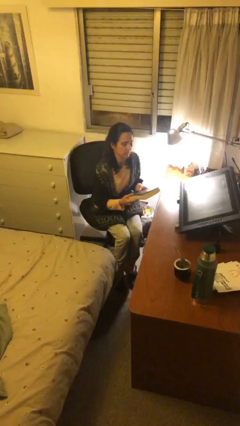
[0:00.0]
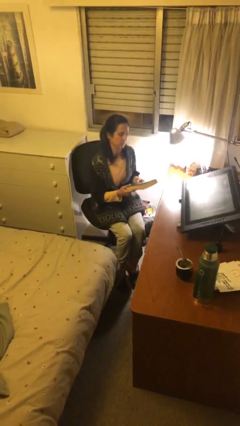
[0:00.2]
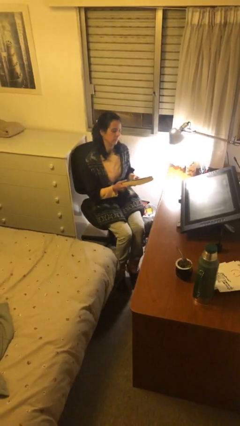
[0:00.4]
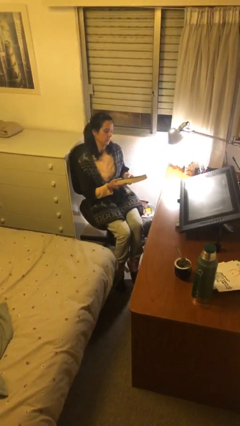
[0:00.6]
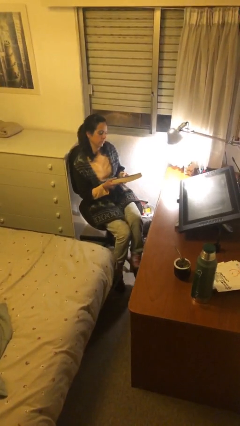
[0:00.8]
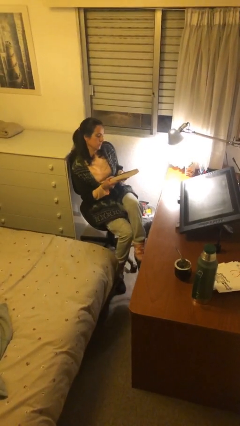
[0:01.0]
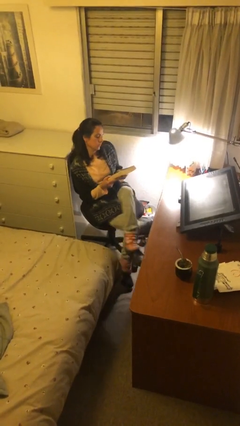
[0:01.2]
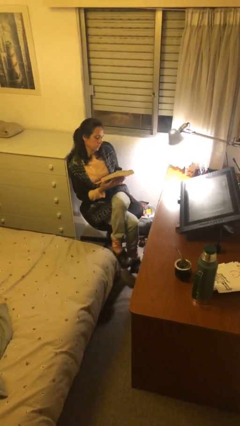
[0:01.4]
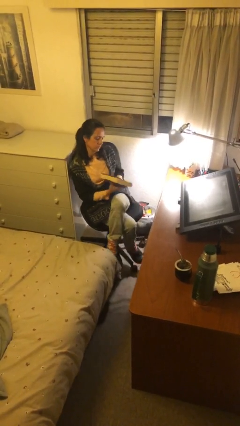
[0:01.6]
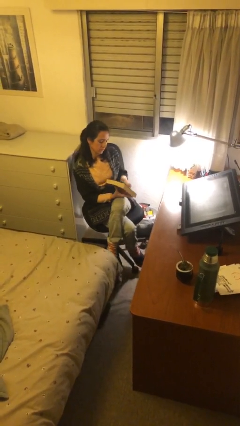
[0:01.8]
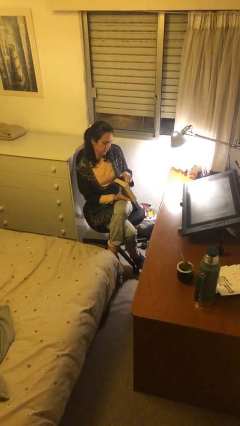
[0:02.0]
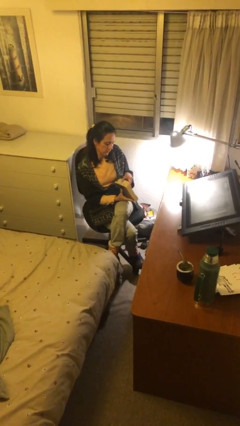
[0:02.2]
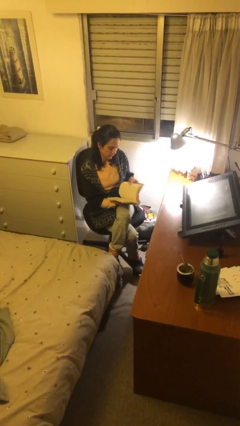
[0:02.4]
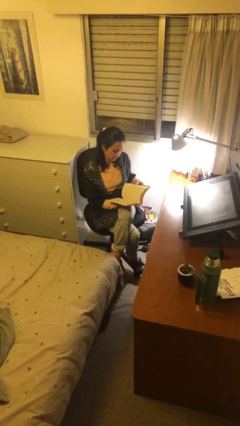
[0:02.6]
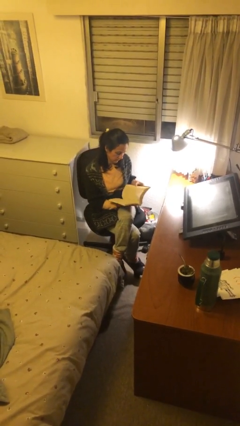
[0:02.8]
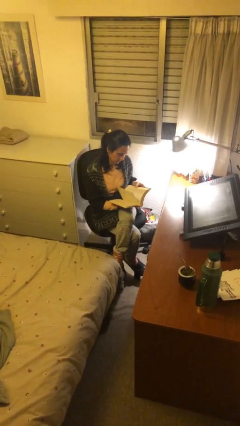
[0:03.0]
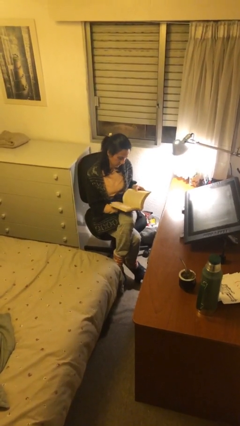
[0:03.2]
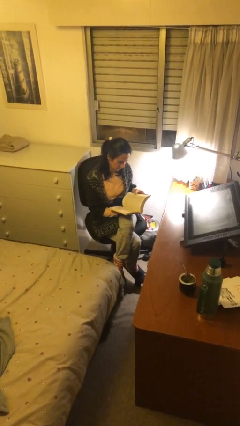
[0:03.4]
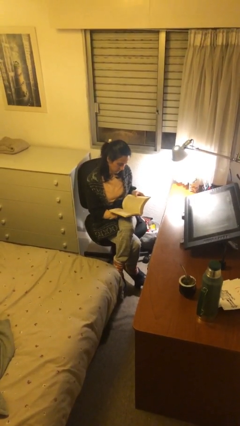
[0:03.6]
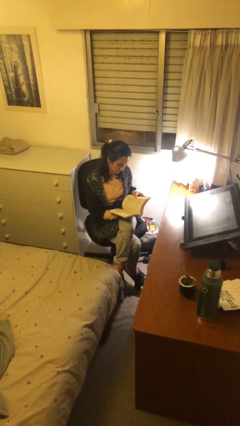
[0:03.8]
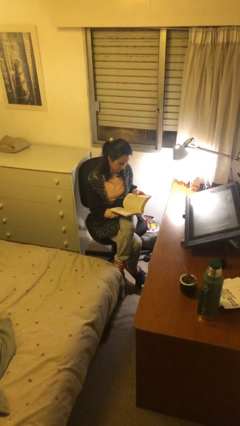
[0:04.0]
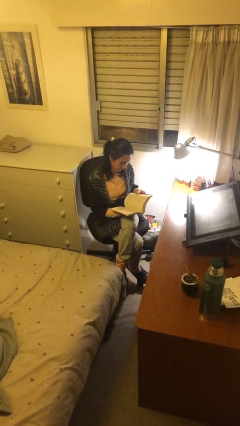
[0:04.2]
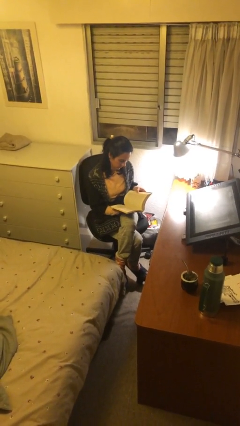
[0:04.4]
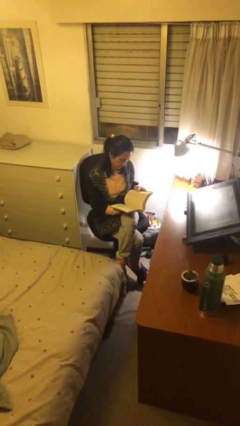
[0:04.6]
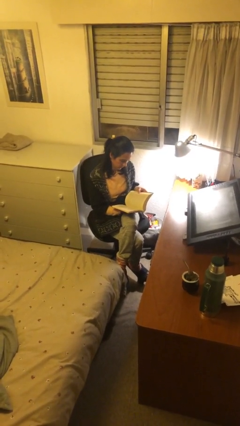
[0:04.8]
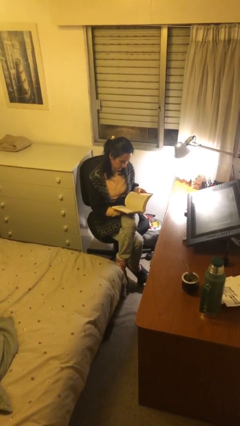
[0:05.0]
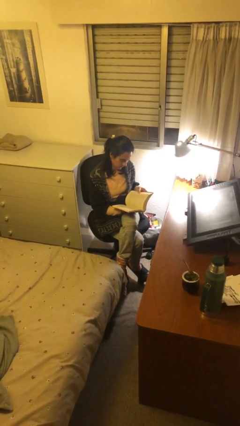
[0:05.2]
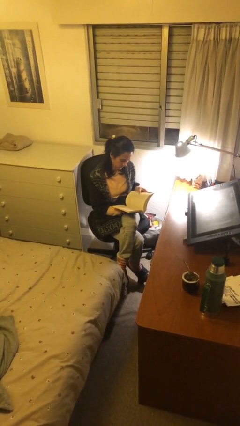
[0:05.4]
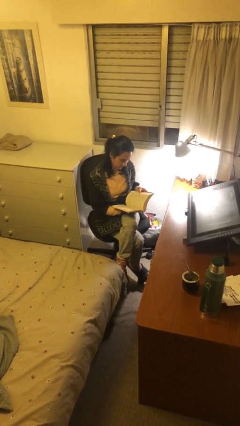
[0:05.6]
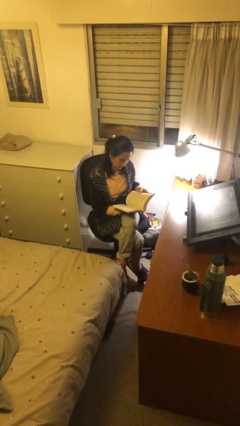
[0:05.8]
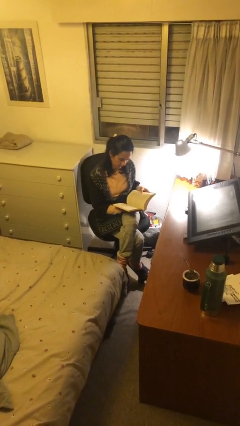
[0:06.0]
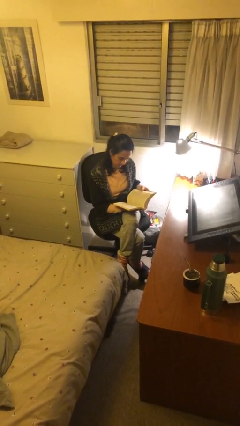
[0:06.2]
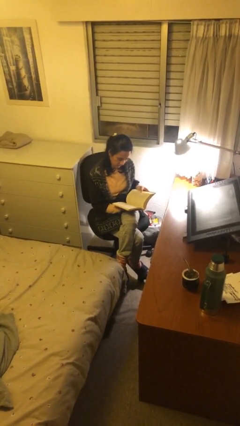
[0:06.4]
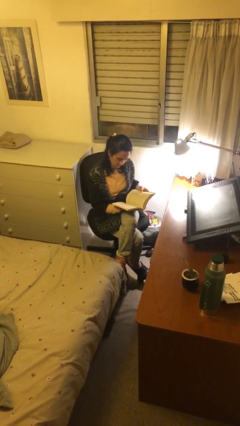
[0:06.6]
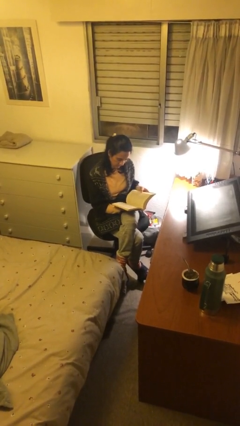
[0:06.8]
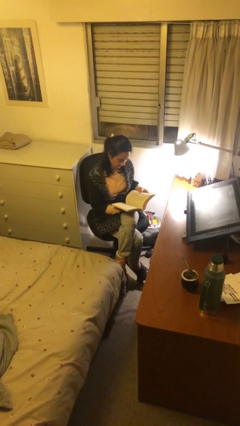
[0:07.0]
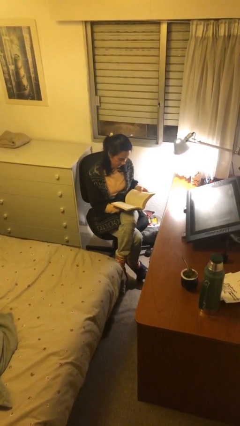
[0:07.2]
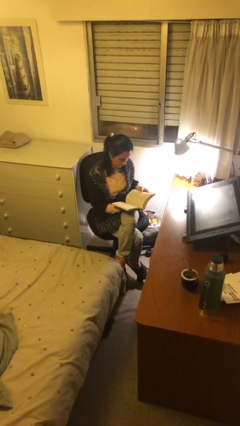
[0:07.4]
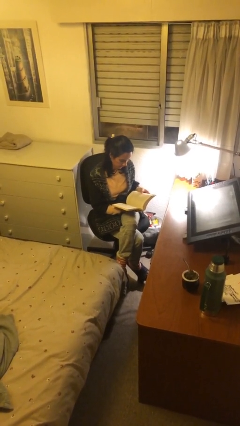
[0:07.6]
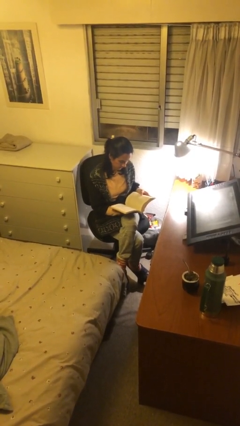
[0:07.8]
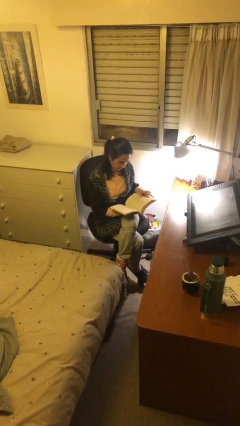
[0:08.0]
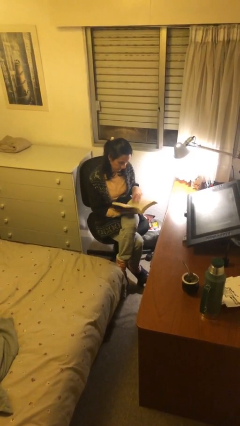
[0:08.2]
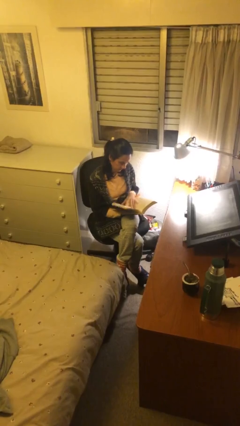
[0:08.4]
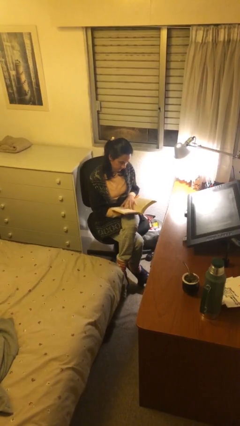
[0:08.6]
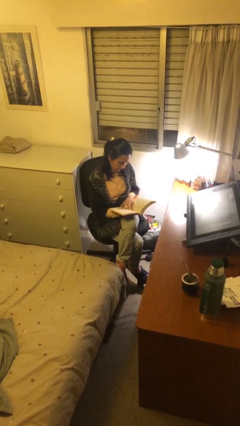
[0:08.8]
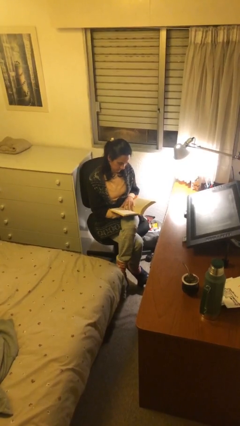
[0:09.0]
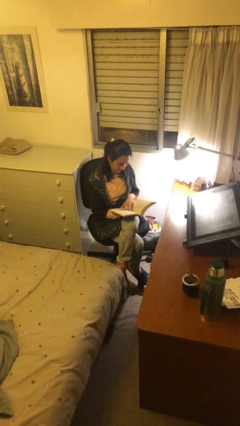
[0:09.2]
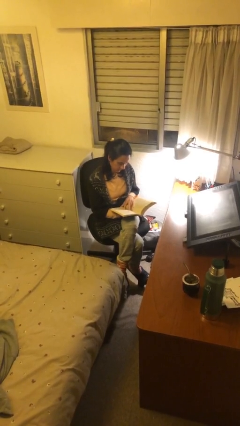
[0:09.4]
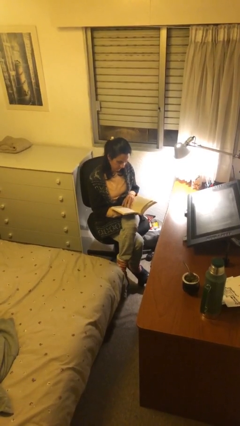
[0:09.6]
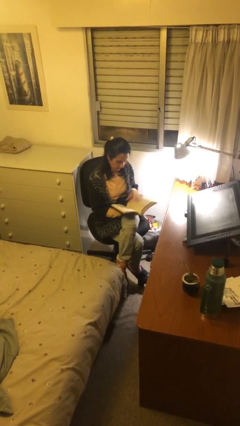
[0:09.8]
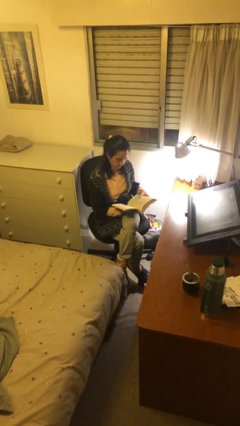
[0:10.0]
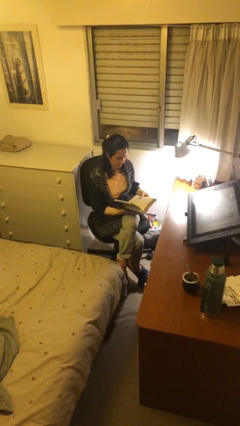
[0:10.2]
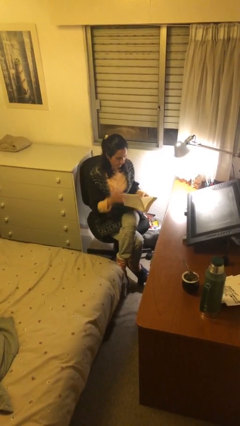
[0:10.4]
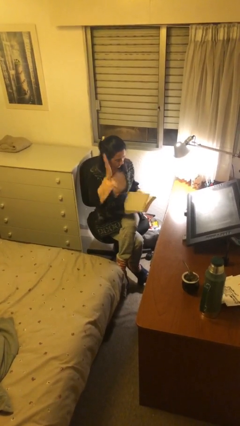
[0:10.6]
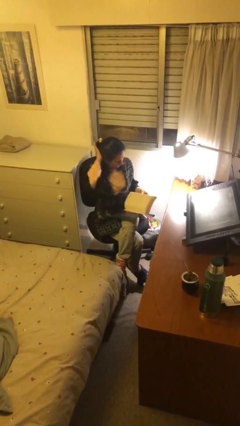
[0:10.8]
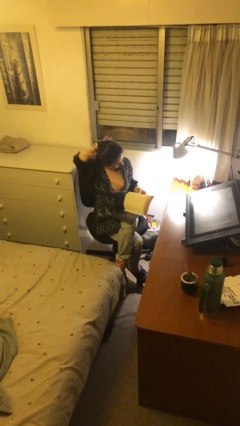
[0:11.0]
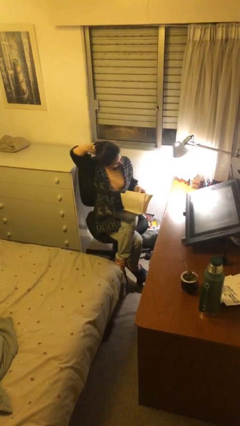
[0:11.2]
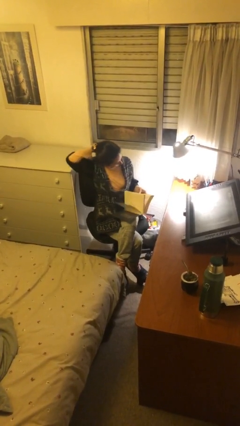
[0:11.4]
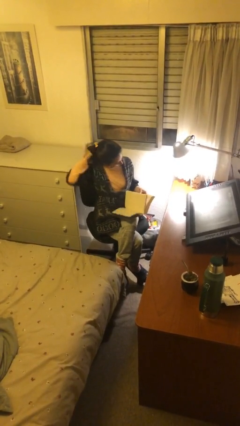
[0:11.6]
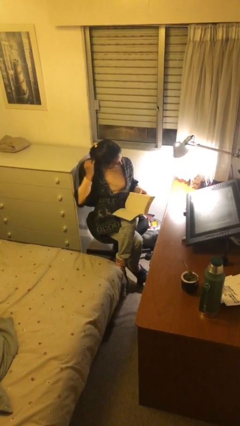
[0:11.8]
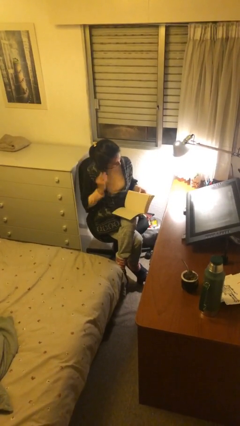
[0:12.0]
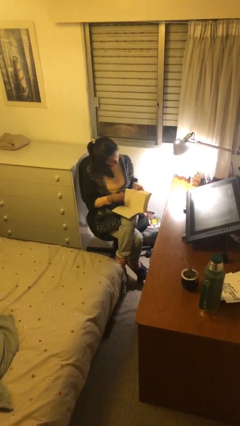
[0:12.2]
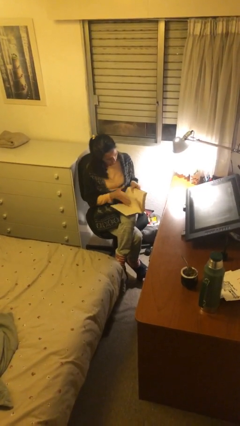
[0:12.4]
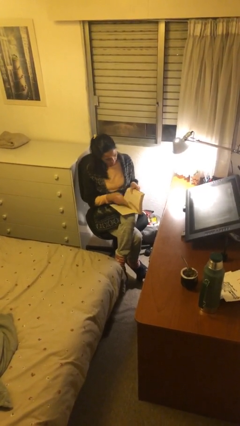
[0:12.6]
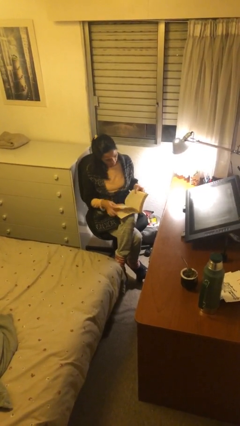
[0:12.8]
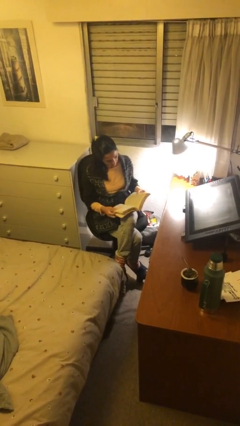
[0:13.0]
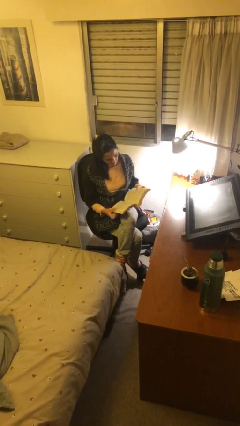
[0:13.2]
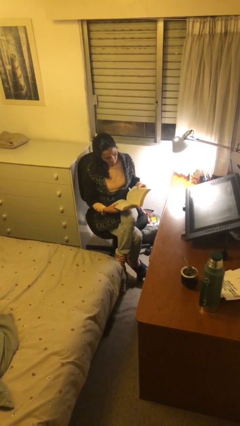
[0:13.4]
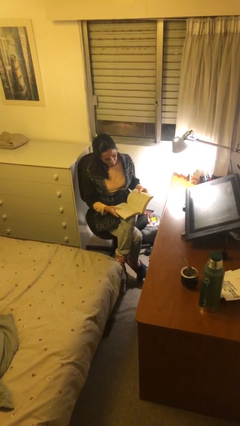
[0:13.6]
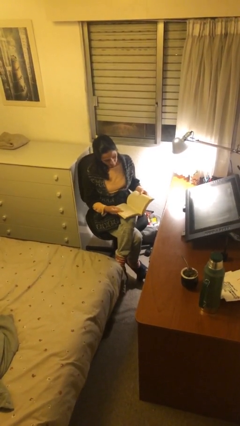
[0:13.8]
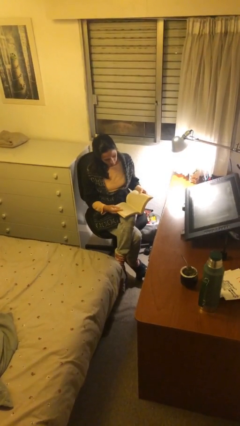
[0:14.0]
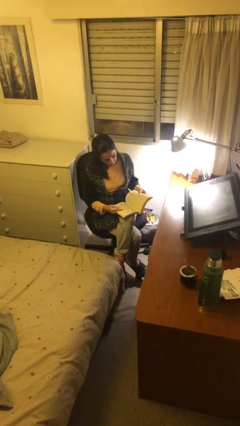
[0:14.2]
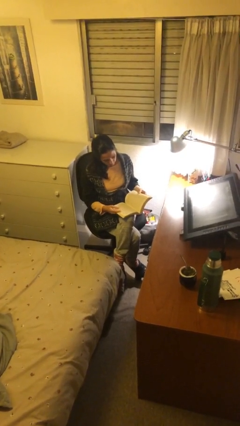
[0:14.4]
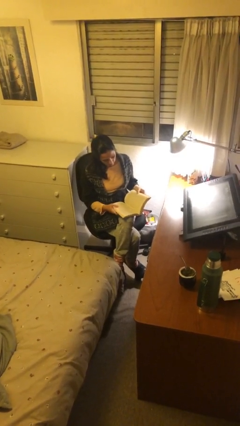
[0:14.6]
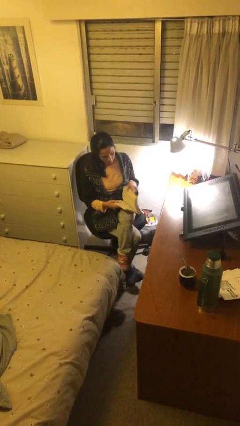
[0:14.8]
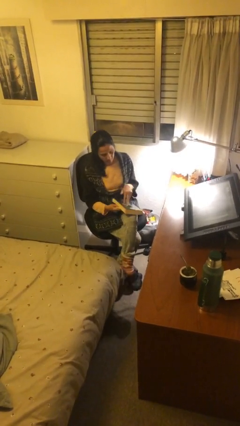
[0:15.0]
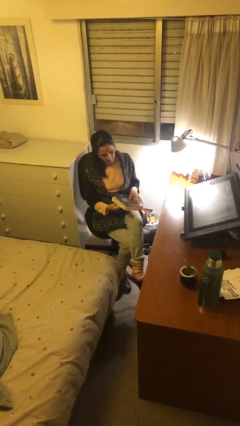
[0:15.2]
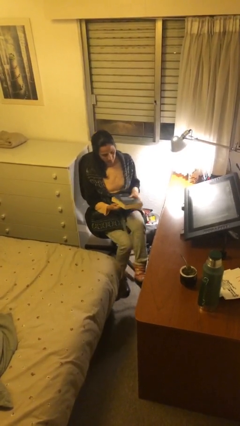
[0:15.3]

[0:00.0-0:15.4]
person reads document

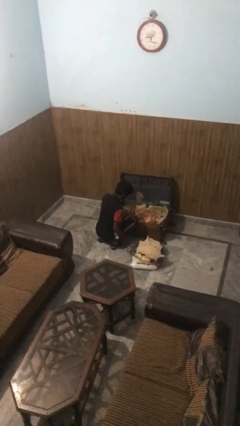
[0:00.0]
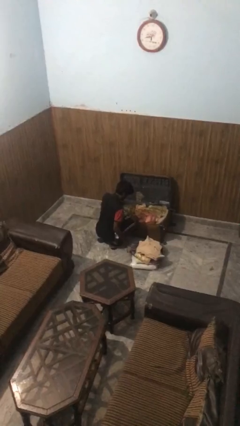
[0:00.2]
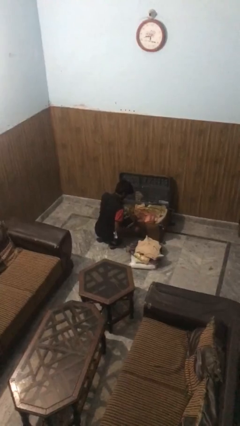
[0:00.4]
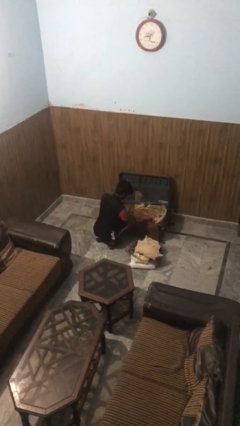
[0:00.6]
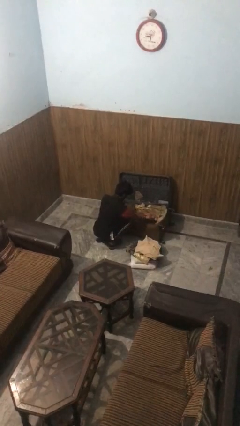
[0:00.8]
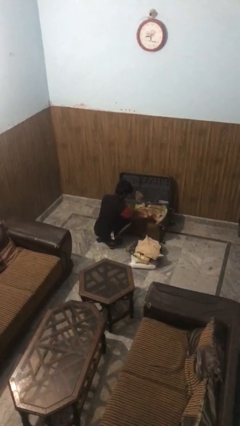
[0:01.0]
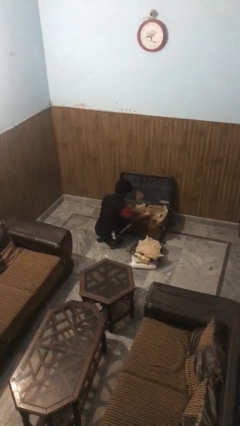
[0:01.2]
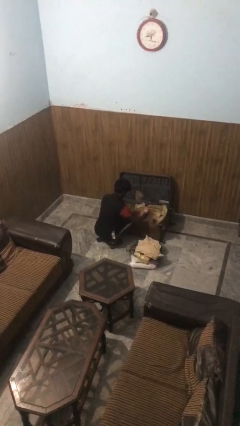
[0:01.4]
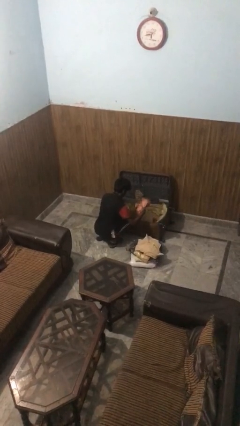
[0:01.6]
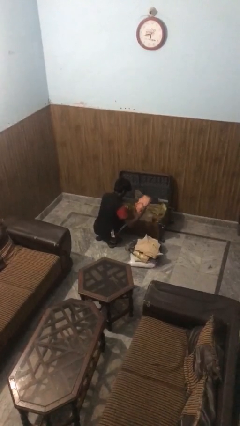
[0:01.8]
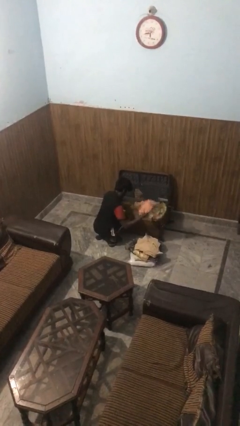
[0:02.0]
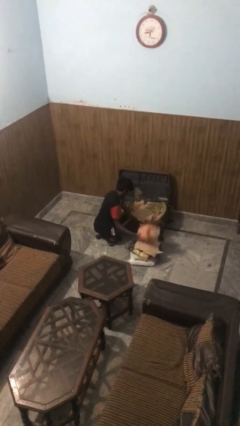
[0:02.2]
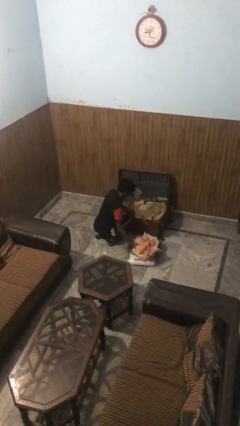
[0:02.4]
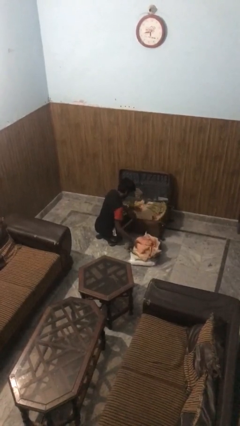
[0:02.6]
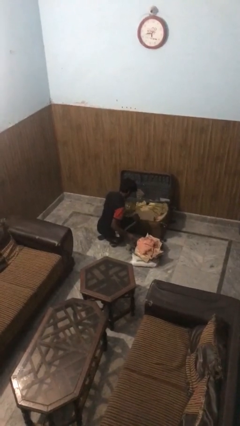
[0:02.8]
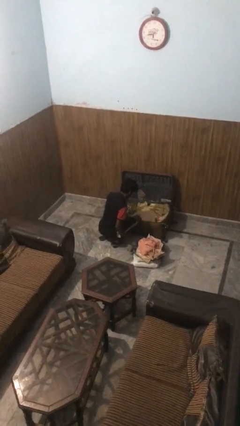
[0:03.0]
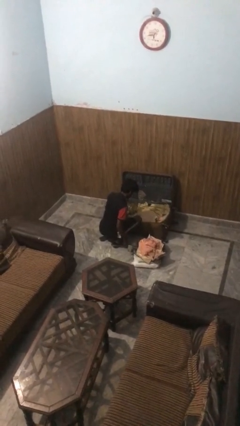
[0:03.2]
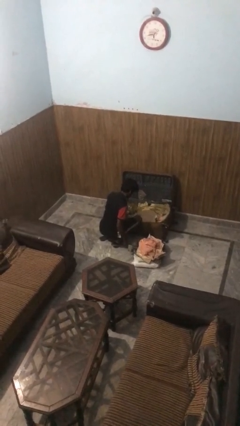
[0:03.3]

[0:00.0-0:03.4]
person unloads clothes from suitcase
